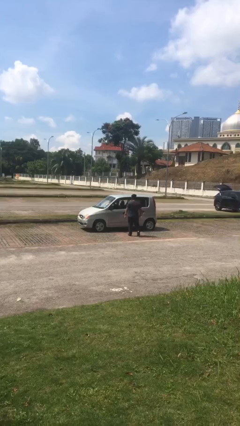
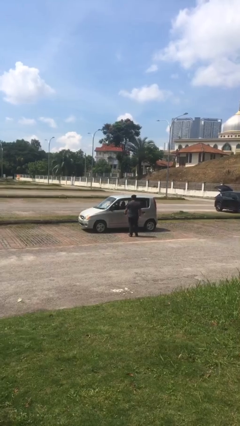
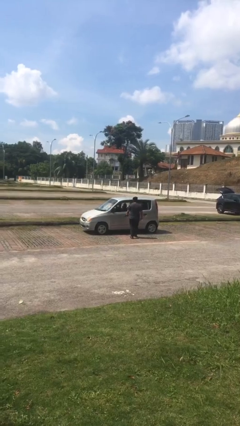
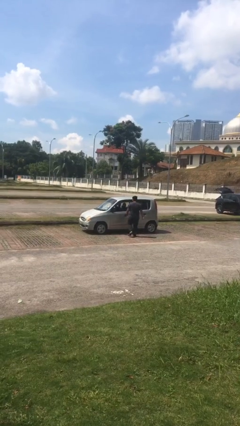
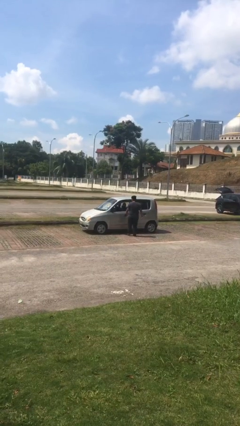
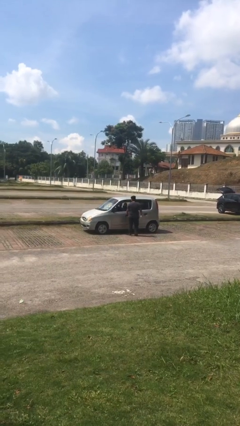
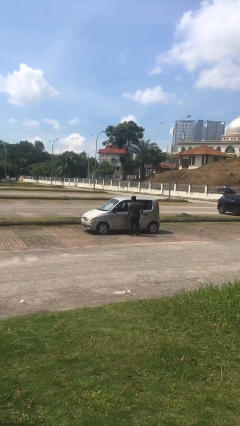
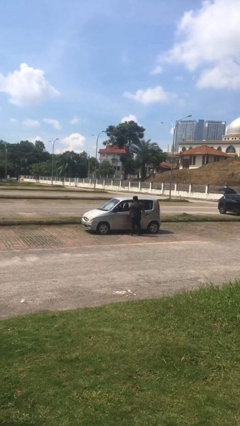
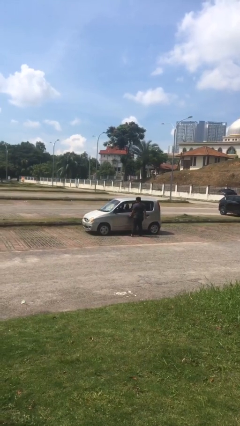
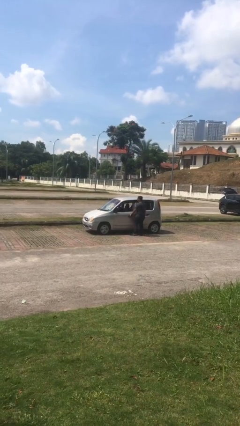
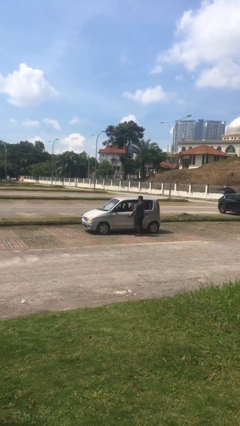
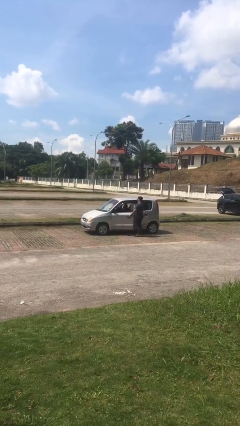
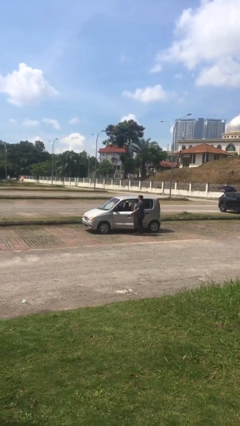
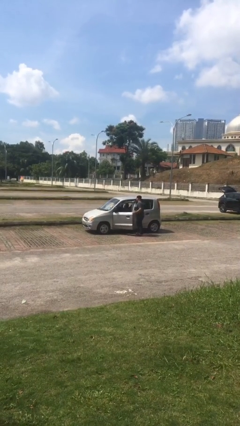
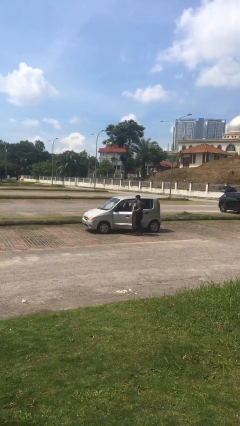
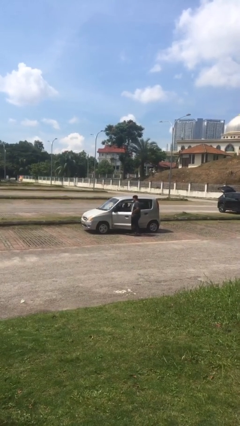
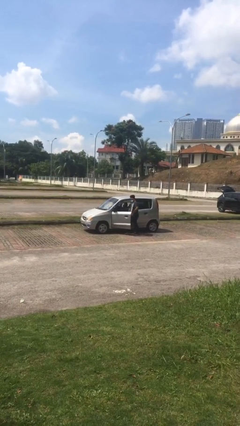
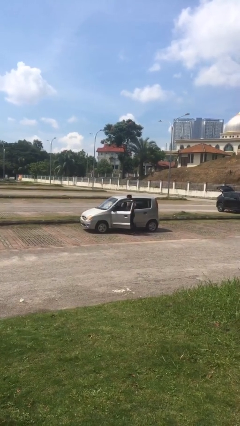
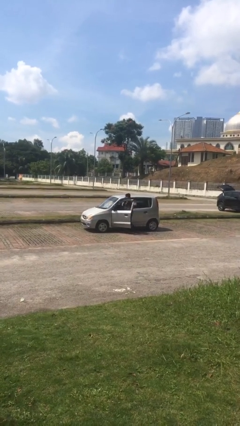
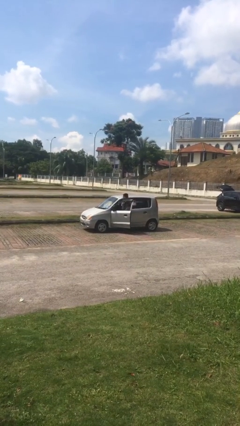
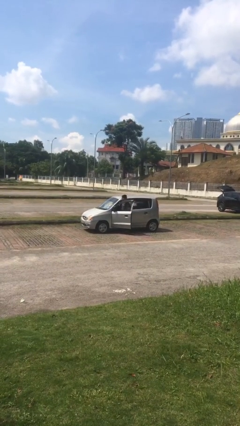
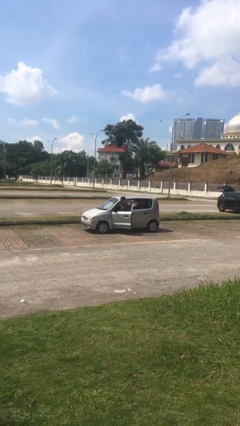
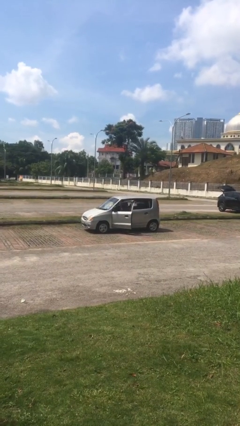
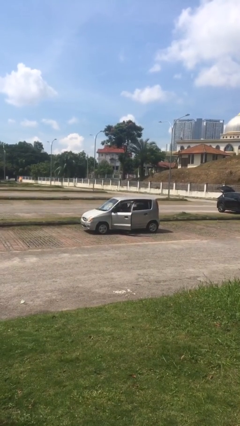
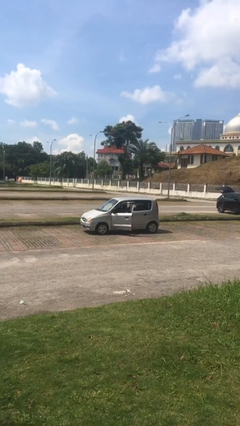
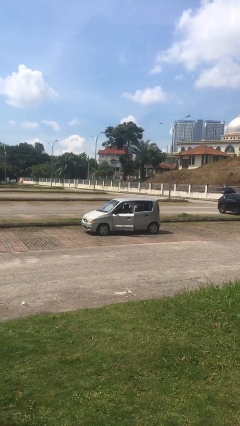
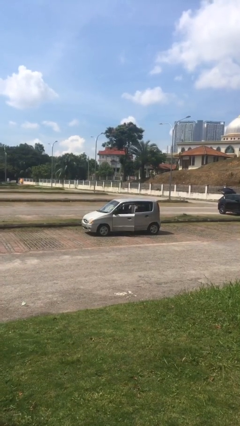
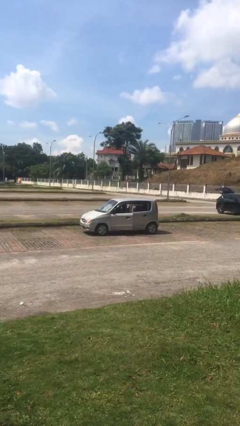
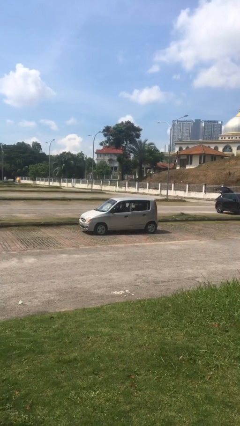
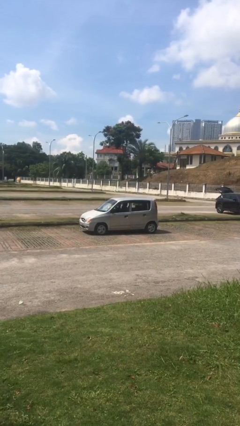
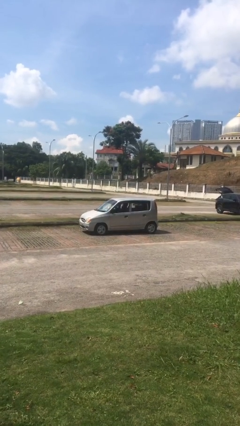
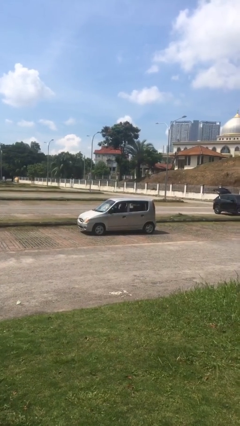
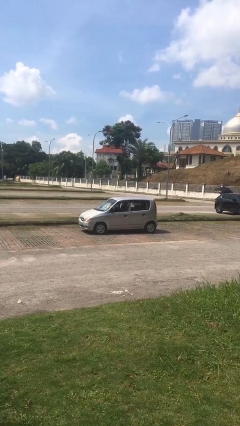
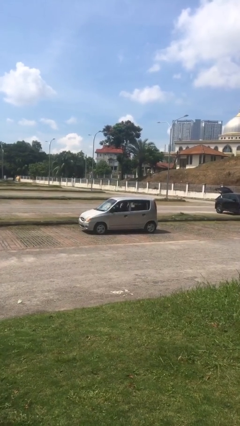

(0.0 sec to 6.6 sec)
car picks up person

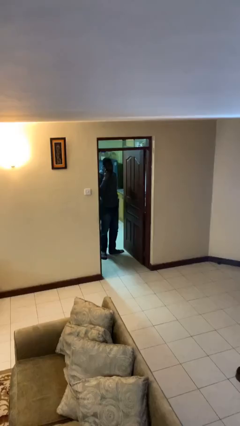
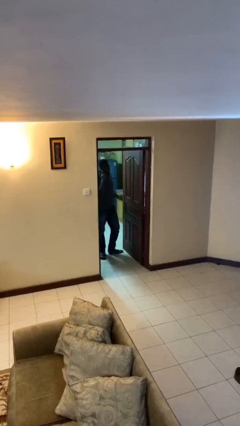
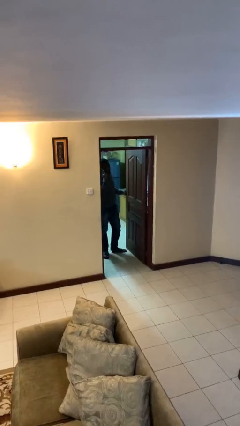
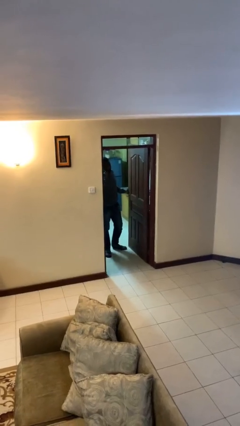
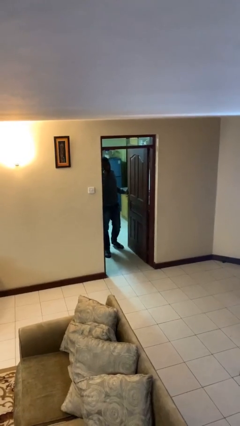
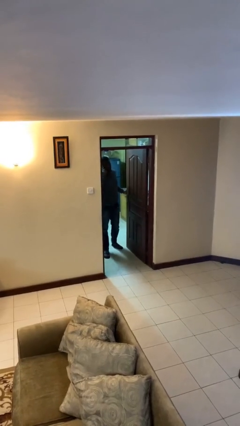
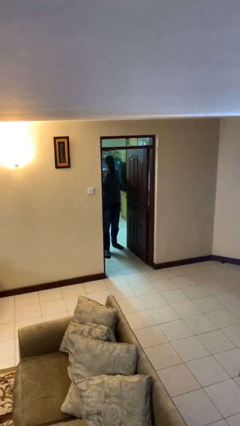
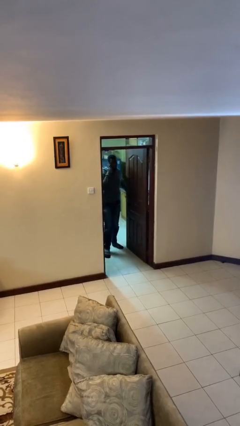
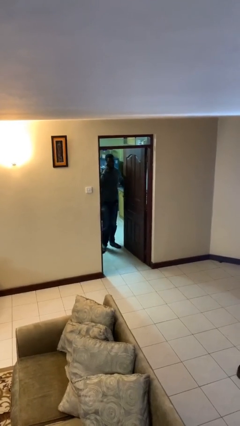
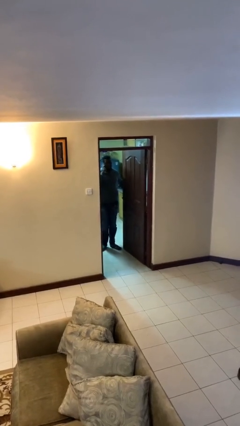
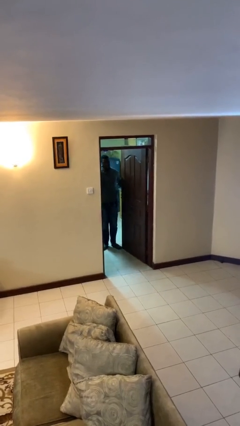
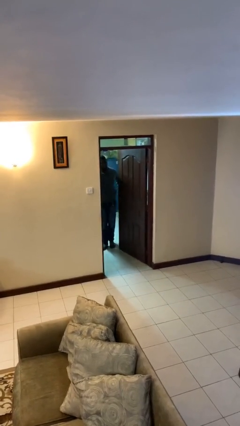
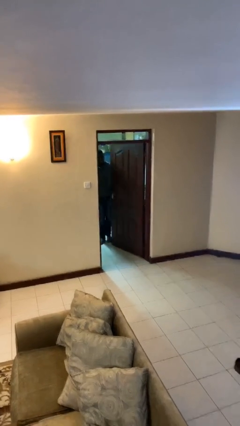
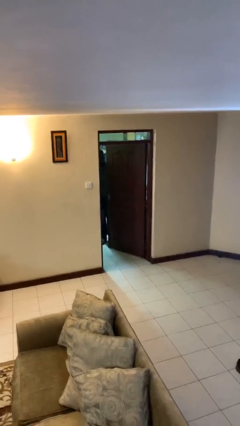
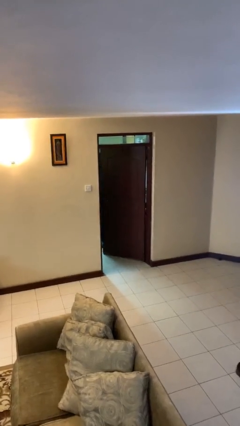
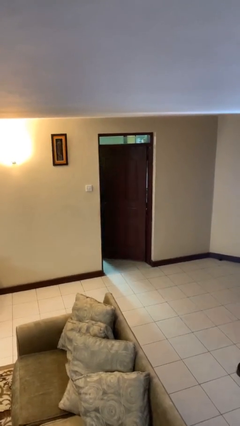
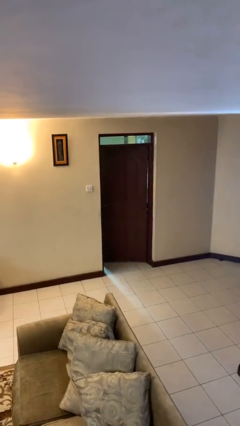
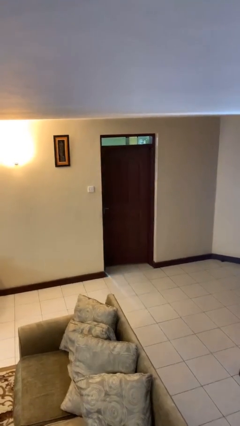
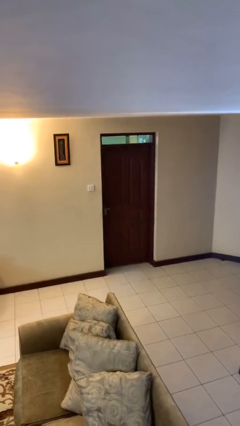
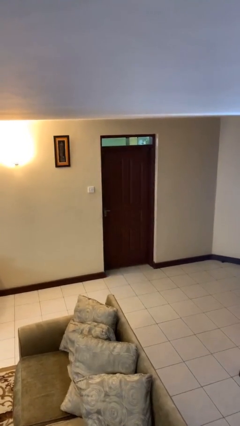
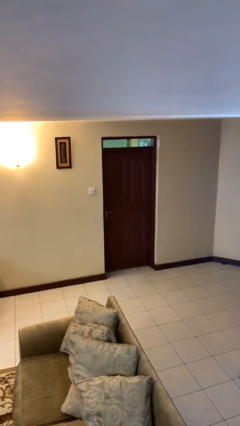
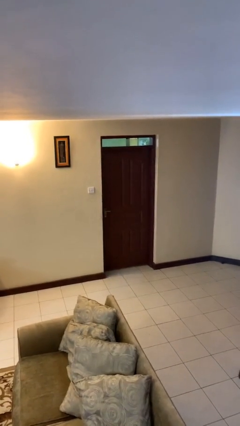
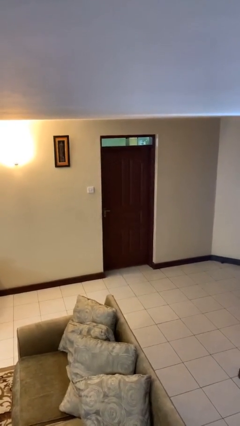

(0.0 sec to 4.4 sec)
person closes facility door

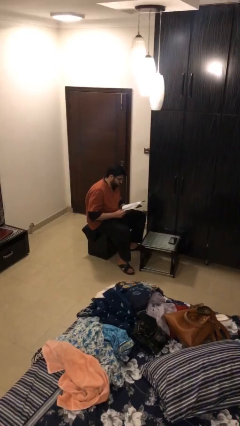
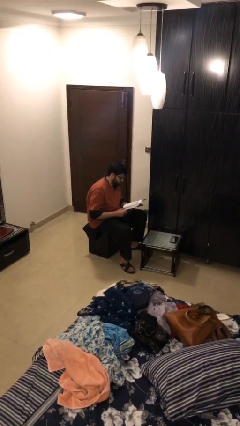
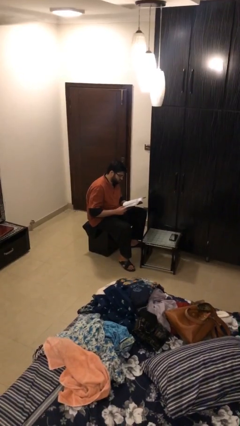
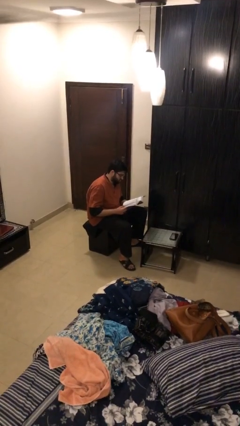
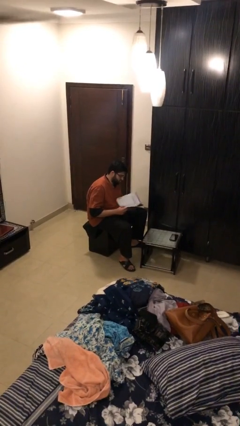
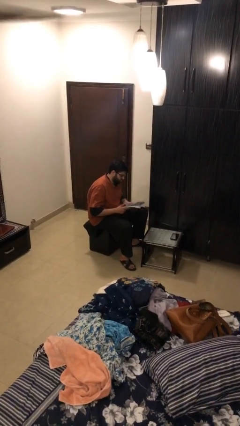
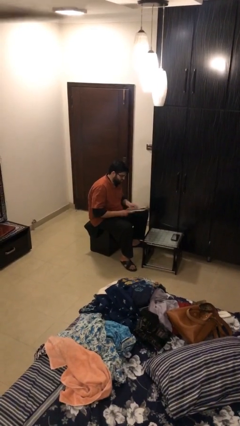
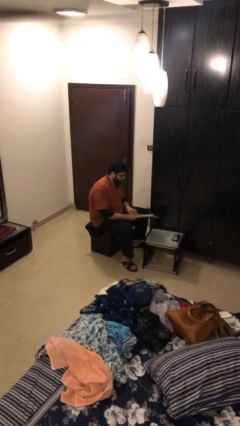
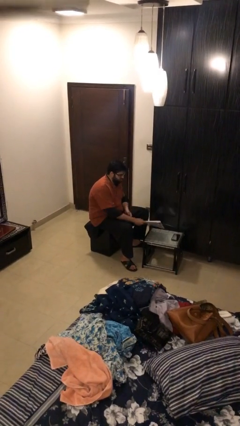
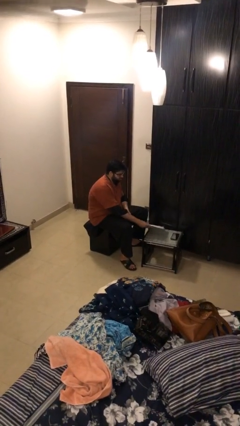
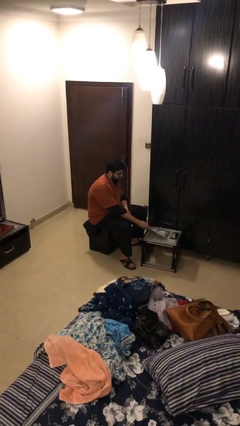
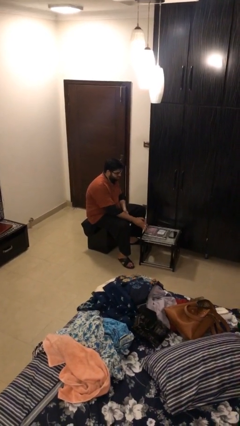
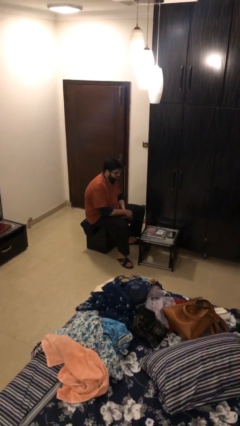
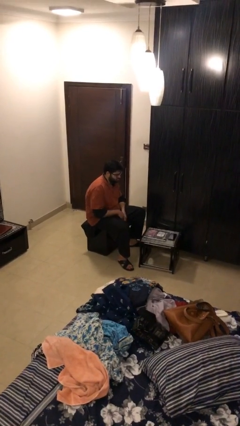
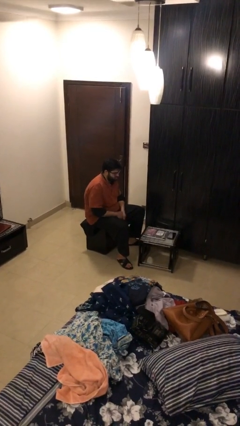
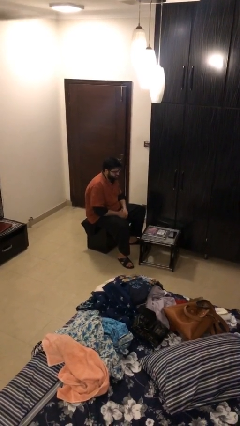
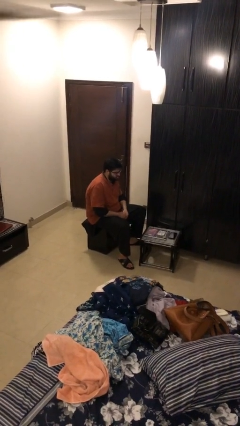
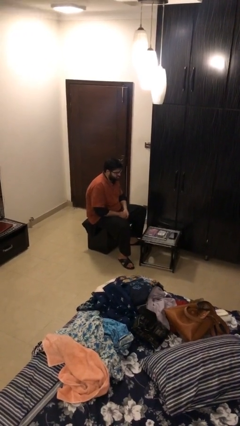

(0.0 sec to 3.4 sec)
person puts down object on table

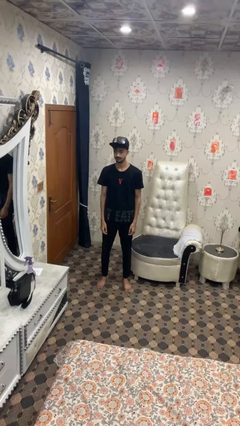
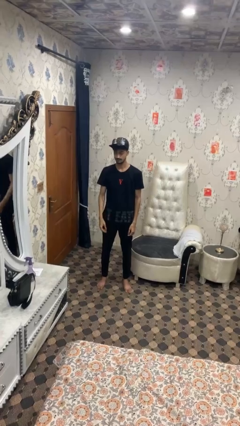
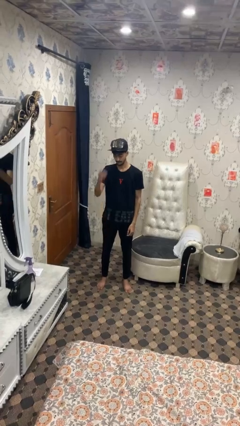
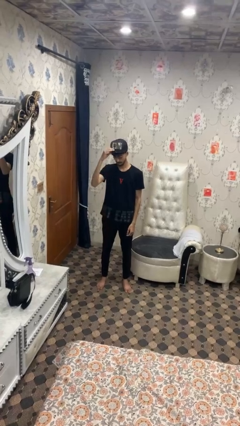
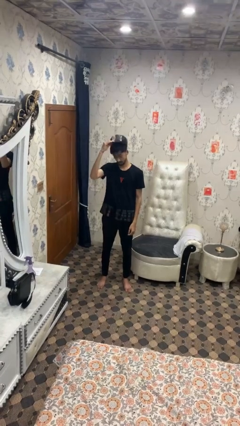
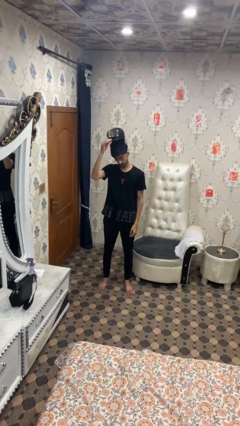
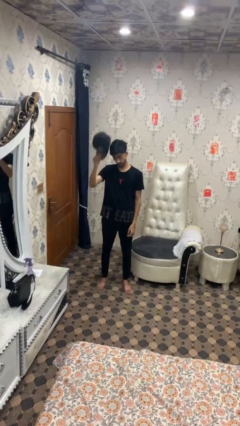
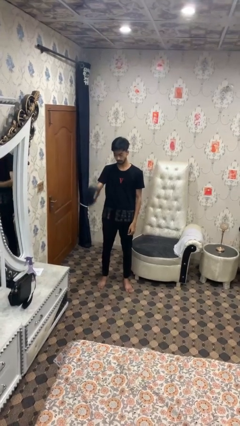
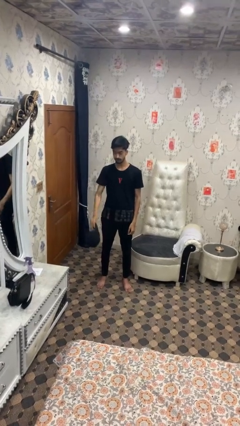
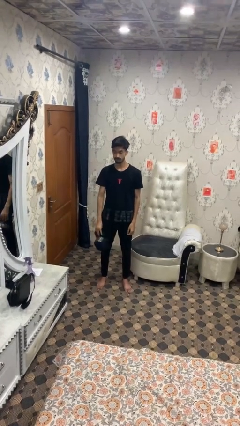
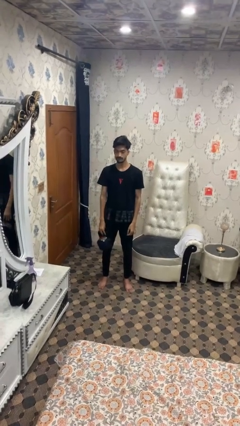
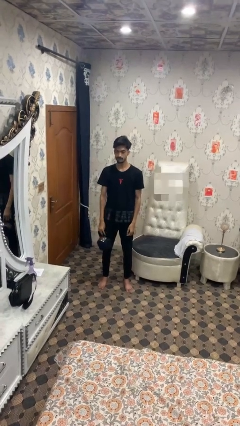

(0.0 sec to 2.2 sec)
person takes off hat

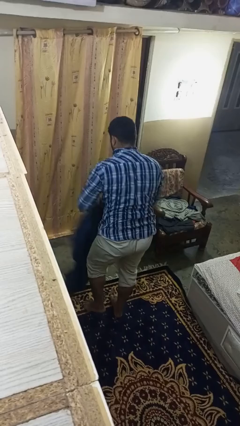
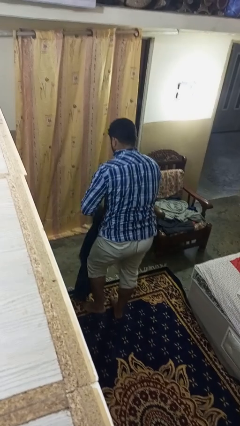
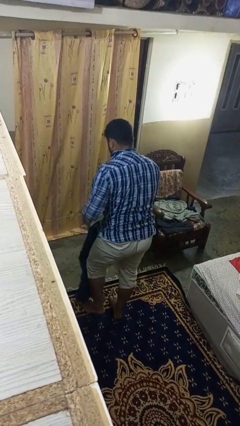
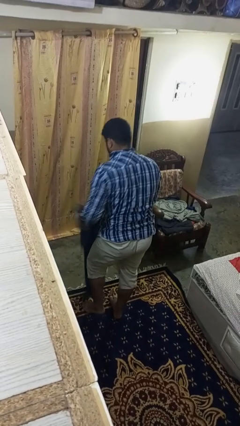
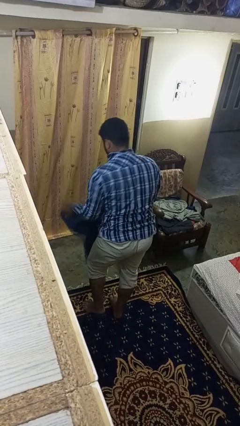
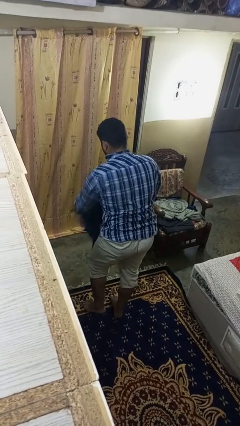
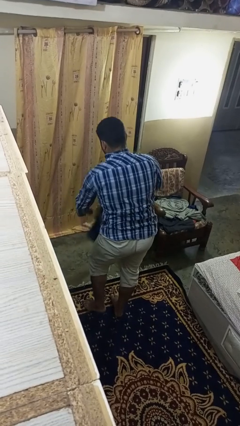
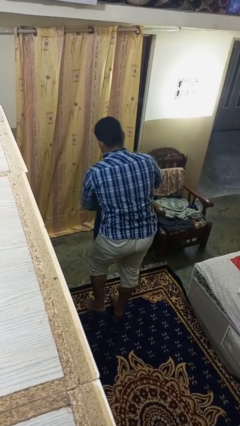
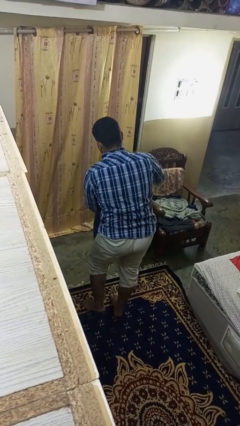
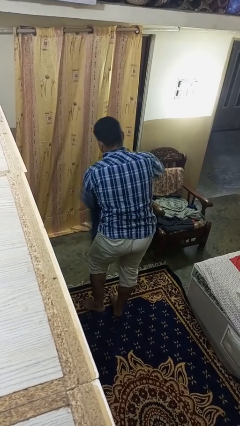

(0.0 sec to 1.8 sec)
person puts on pants
